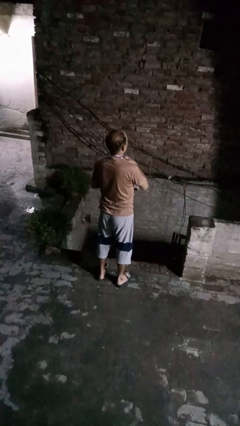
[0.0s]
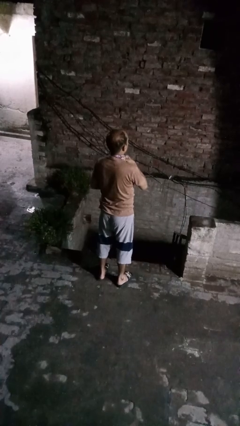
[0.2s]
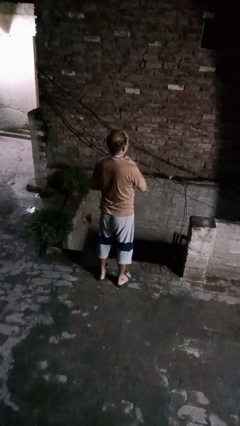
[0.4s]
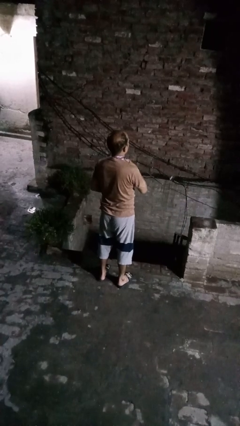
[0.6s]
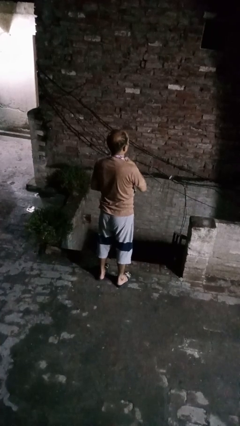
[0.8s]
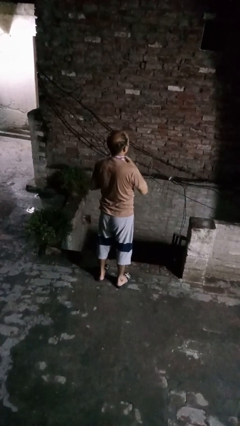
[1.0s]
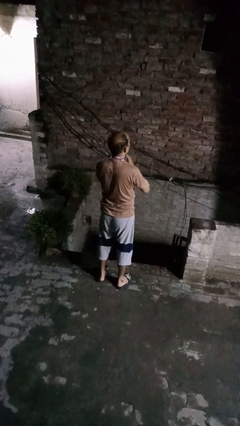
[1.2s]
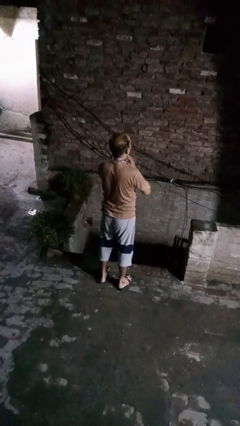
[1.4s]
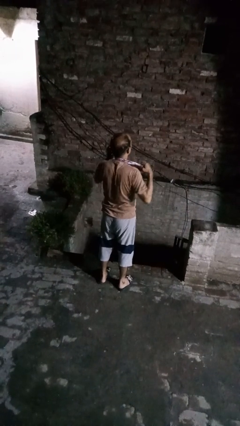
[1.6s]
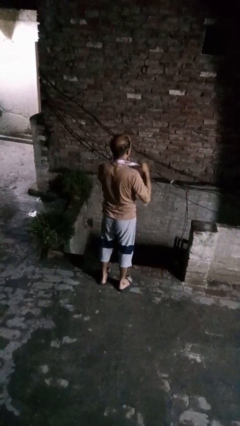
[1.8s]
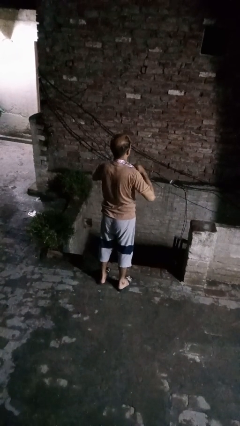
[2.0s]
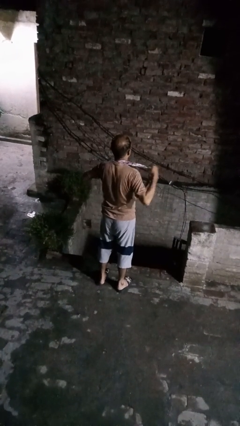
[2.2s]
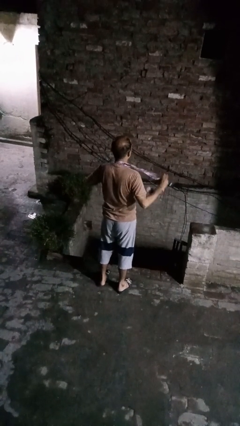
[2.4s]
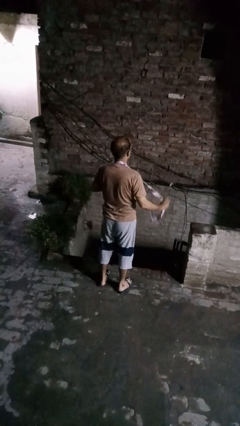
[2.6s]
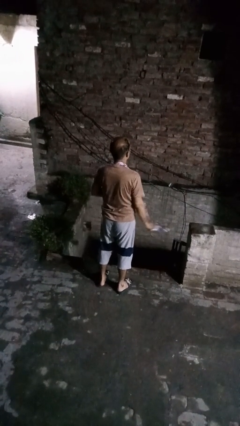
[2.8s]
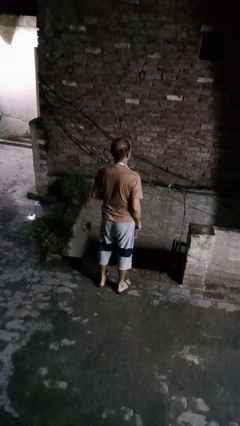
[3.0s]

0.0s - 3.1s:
person takes off necktie

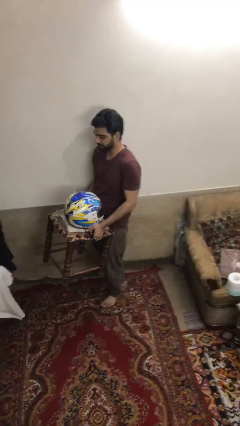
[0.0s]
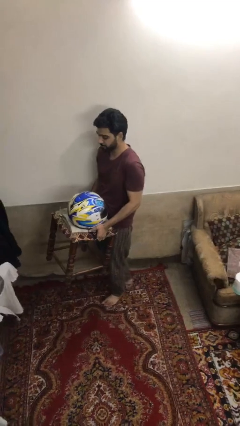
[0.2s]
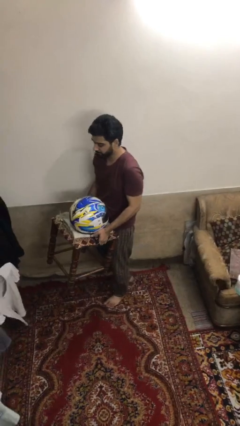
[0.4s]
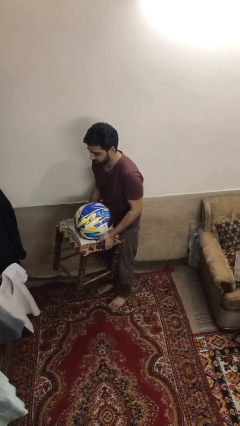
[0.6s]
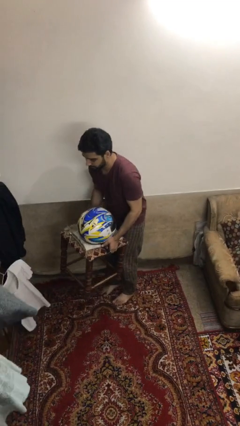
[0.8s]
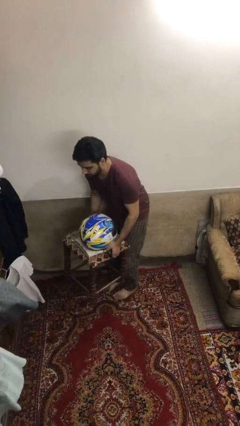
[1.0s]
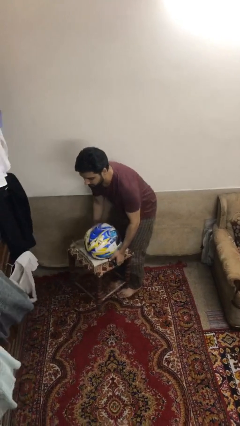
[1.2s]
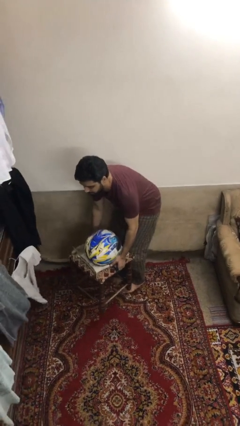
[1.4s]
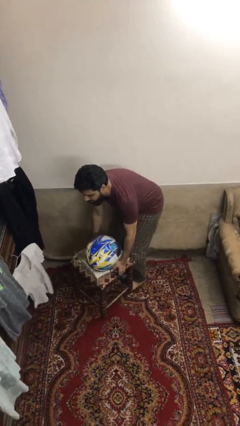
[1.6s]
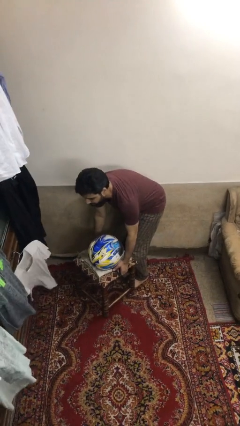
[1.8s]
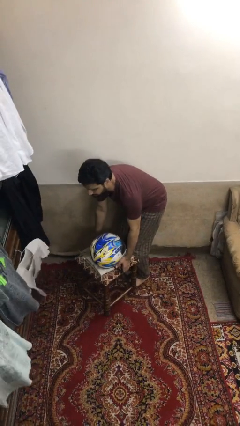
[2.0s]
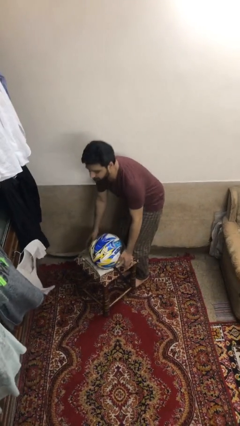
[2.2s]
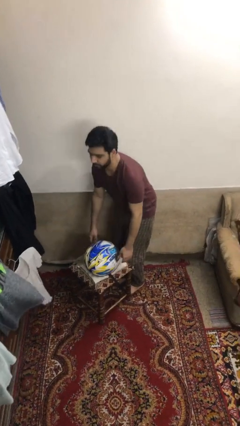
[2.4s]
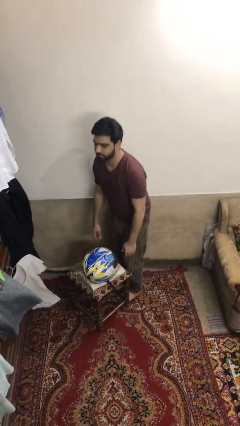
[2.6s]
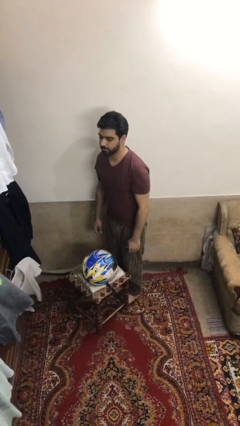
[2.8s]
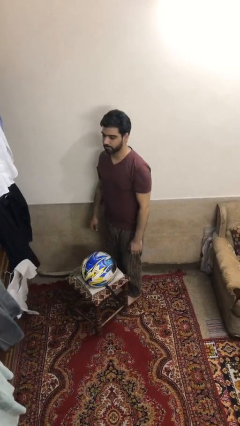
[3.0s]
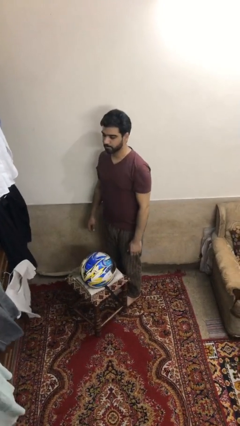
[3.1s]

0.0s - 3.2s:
person puts down object on floor

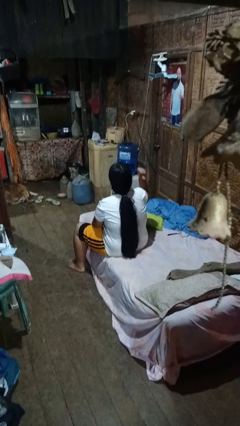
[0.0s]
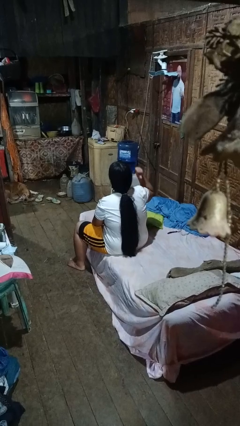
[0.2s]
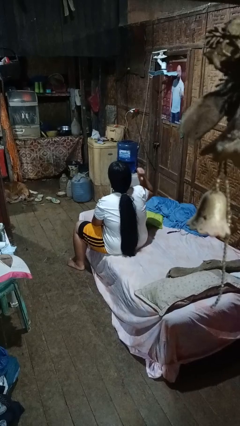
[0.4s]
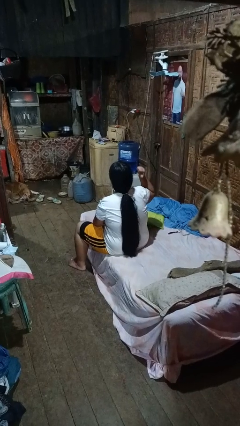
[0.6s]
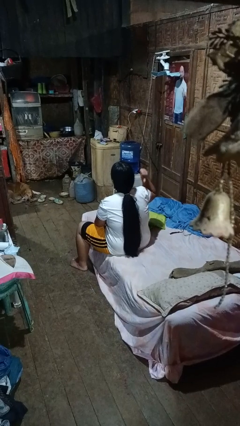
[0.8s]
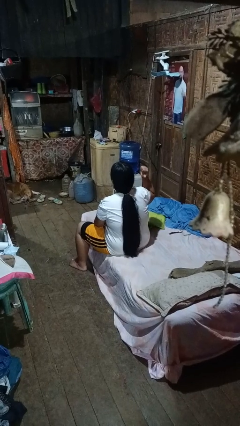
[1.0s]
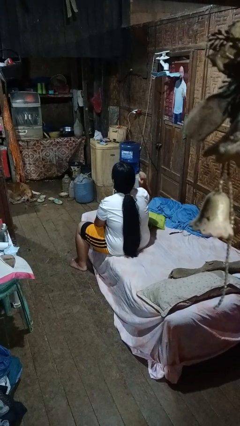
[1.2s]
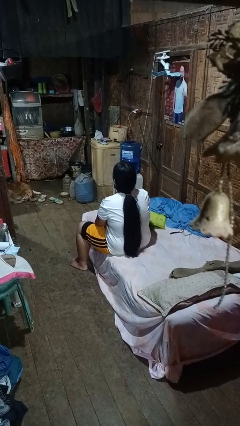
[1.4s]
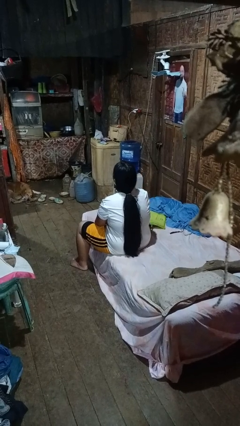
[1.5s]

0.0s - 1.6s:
person gestures behind me

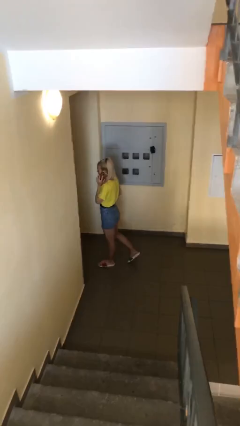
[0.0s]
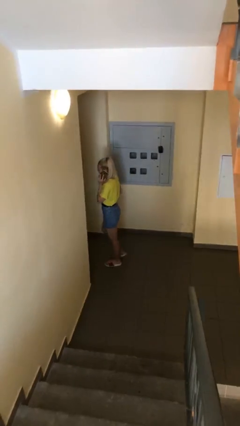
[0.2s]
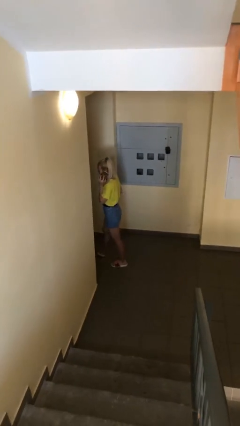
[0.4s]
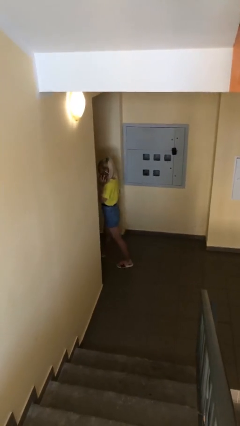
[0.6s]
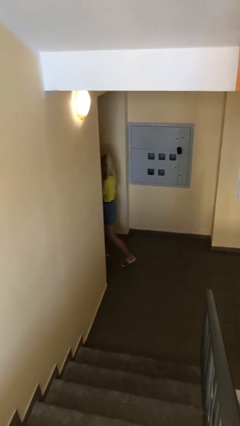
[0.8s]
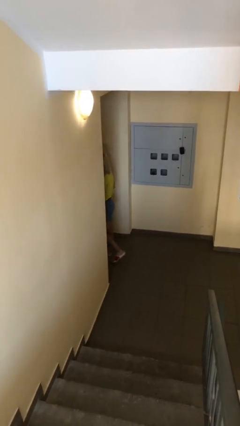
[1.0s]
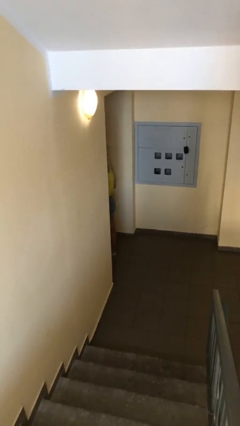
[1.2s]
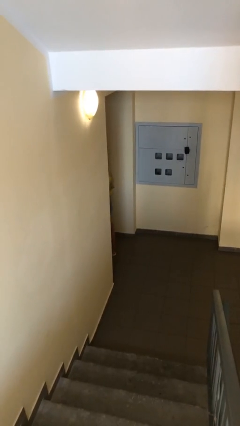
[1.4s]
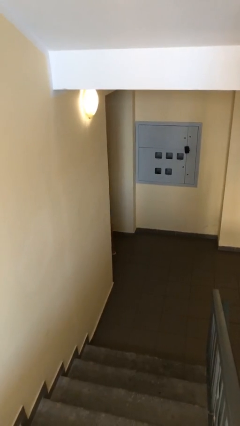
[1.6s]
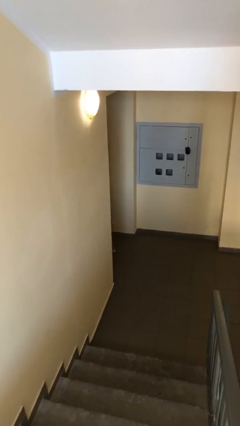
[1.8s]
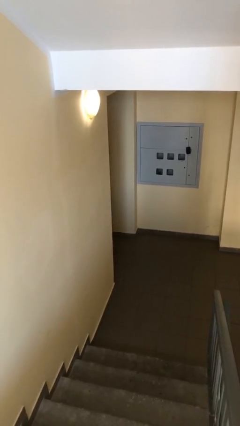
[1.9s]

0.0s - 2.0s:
person exits scene through structure

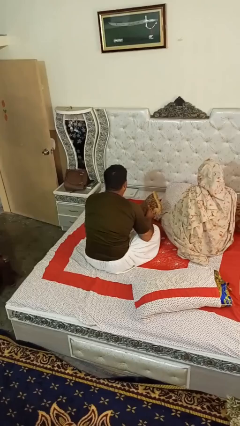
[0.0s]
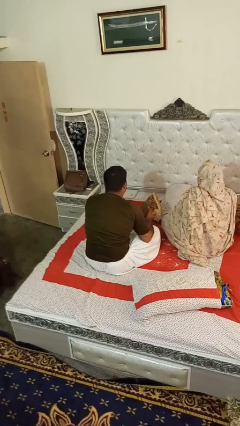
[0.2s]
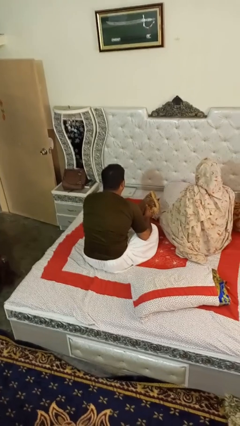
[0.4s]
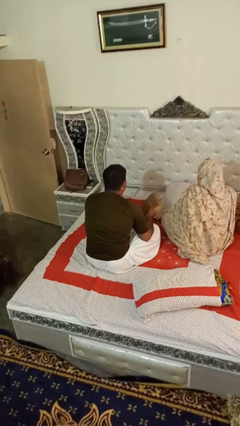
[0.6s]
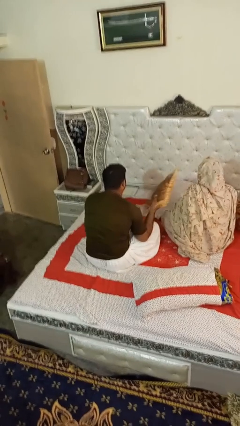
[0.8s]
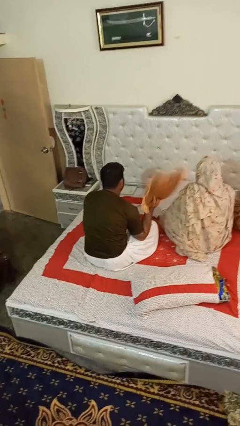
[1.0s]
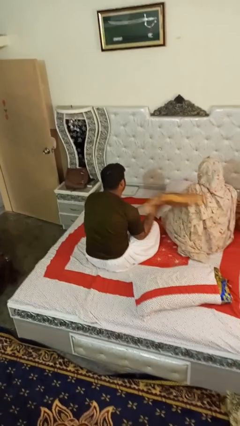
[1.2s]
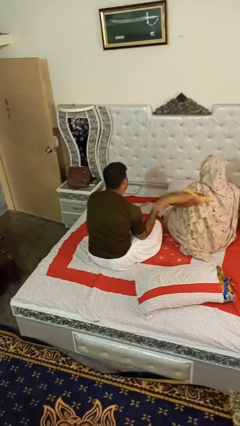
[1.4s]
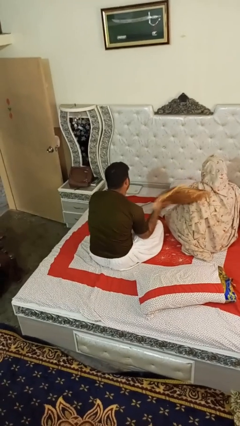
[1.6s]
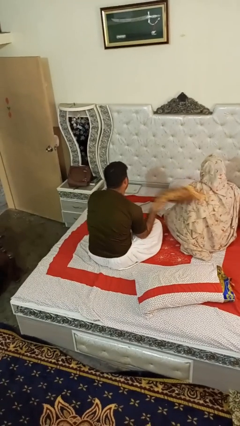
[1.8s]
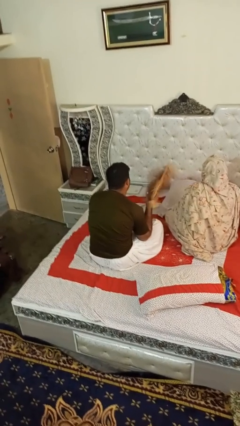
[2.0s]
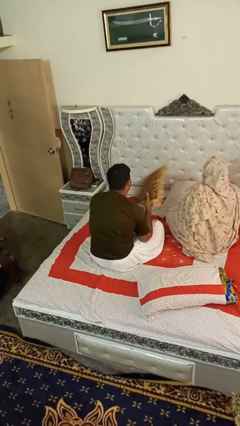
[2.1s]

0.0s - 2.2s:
person hits person with pillow

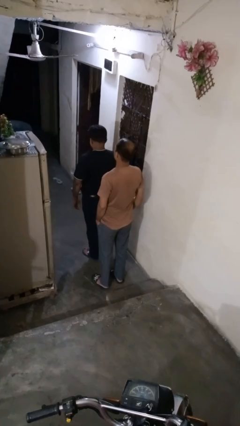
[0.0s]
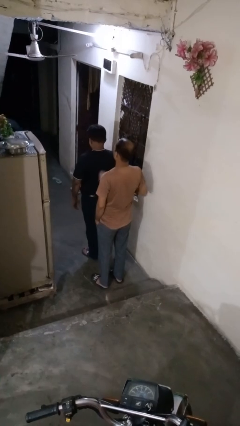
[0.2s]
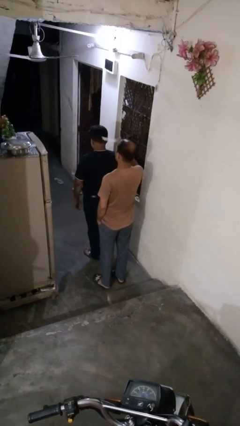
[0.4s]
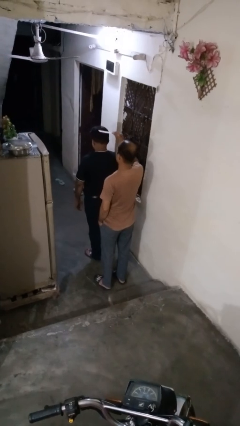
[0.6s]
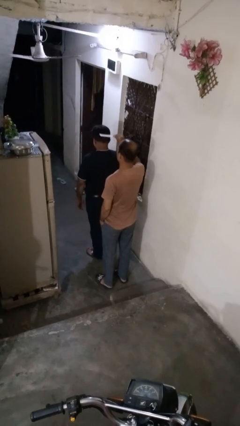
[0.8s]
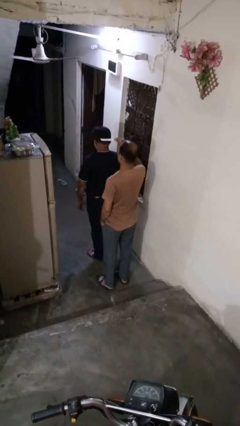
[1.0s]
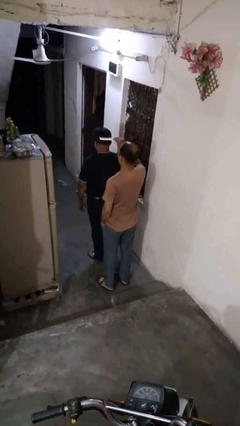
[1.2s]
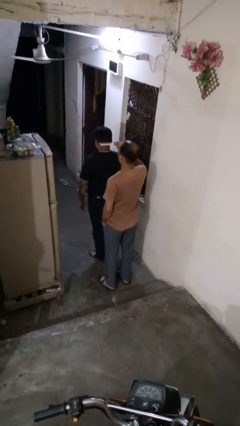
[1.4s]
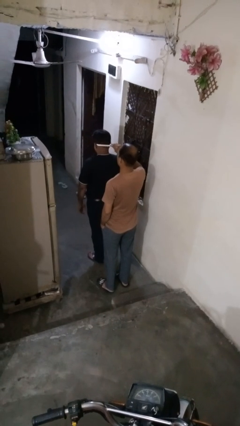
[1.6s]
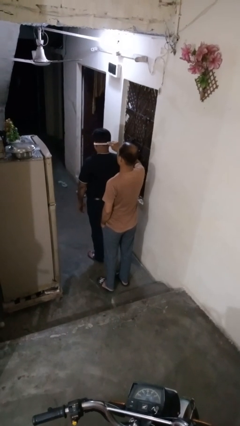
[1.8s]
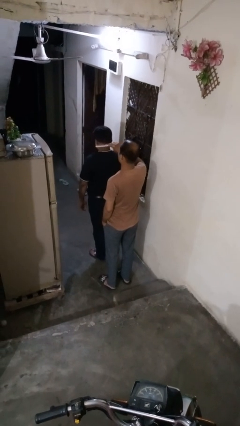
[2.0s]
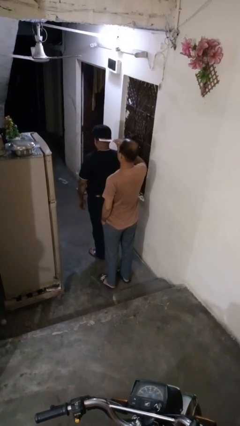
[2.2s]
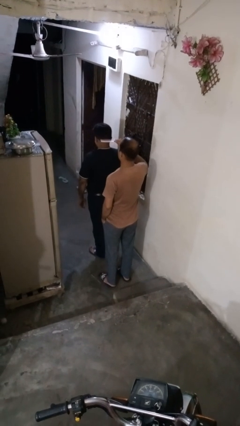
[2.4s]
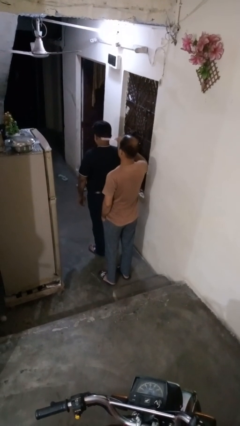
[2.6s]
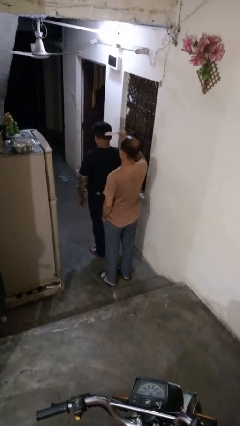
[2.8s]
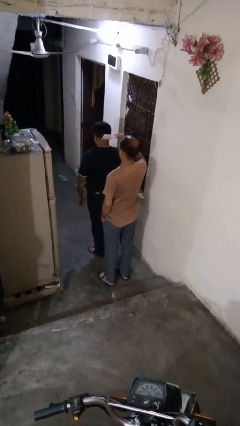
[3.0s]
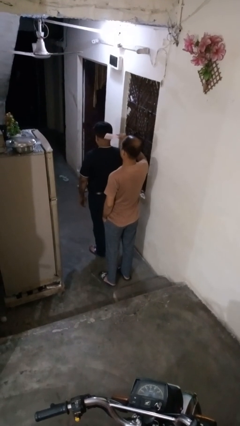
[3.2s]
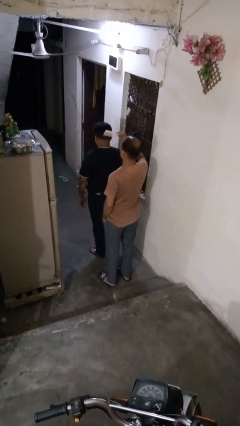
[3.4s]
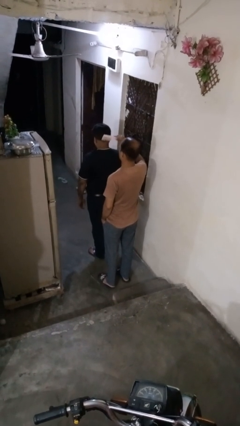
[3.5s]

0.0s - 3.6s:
person brushes hair of person

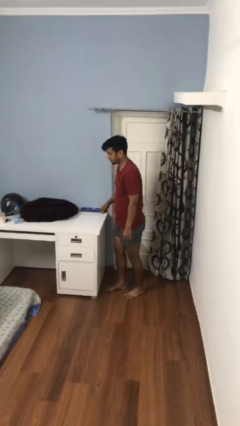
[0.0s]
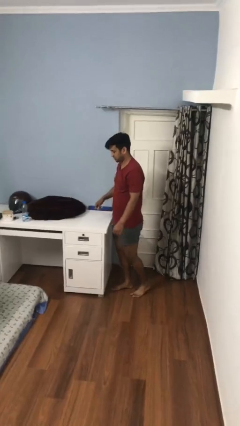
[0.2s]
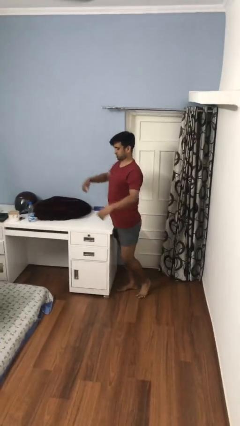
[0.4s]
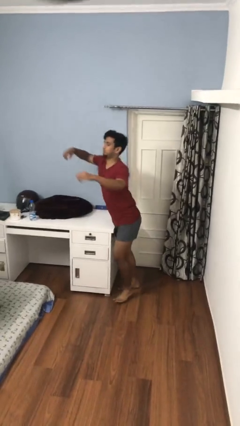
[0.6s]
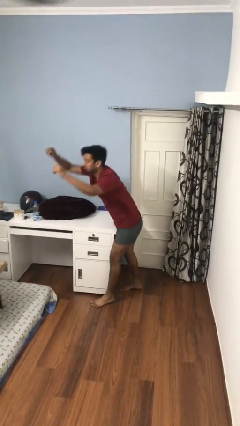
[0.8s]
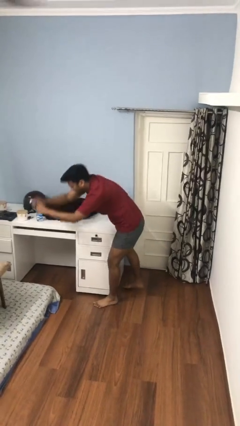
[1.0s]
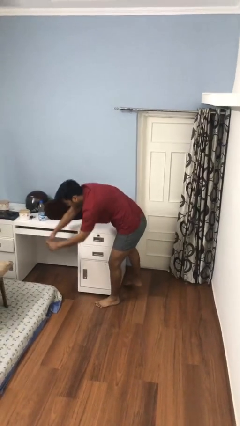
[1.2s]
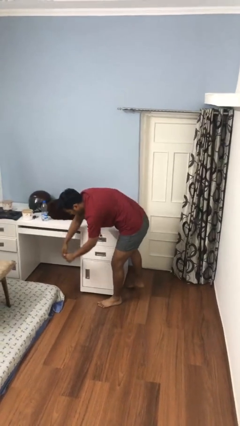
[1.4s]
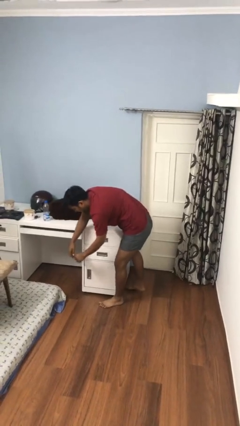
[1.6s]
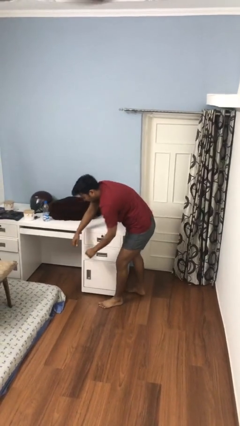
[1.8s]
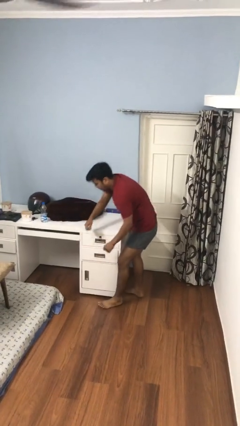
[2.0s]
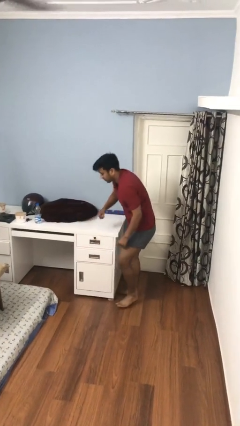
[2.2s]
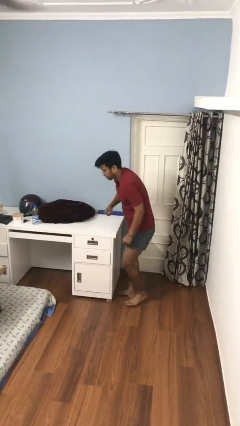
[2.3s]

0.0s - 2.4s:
person bumps into table
